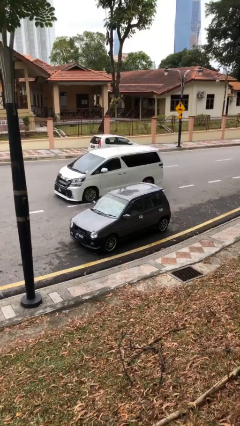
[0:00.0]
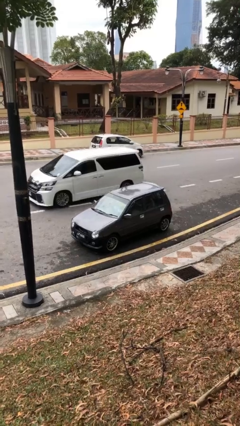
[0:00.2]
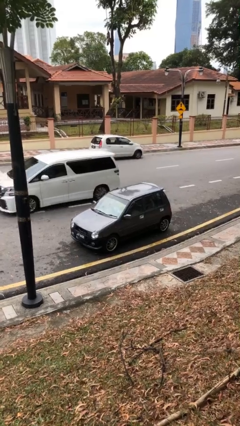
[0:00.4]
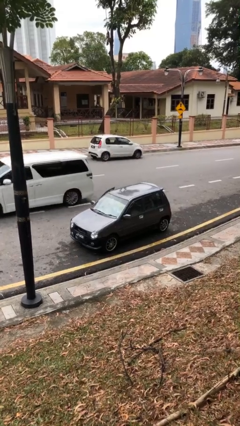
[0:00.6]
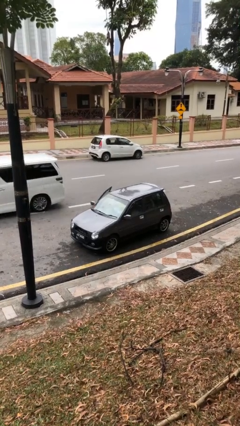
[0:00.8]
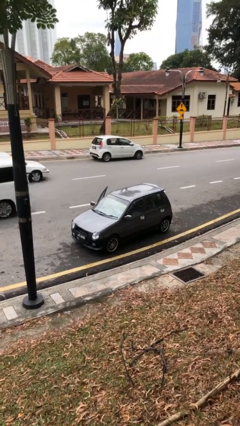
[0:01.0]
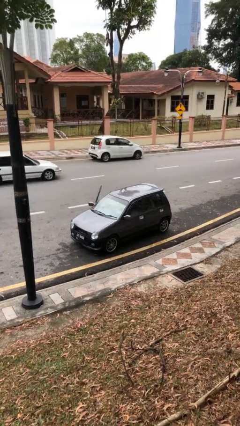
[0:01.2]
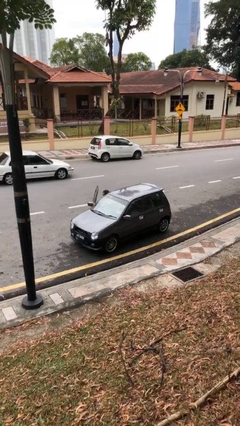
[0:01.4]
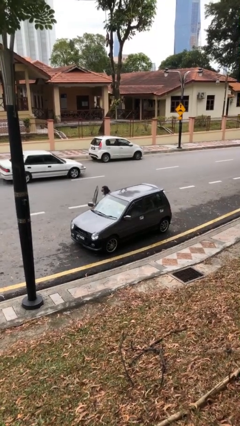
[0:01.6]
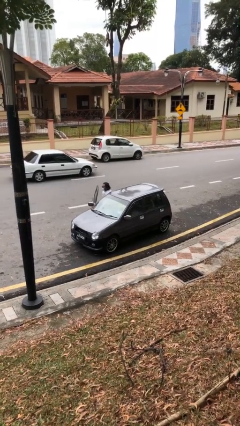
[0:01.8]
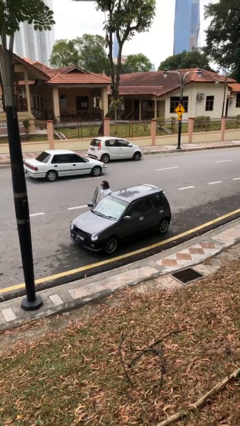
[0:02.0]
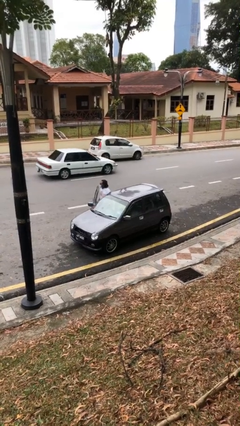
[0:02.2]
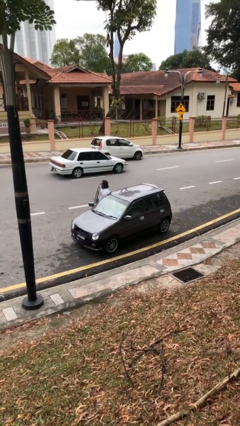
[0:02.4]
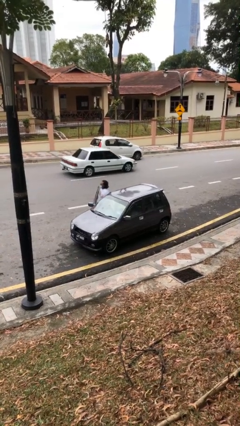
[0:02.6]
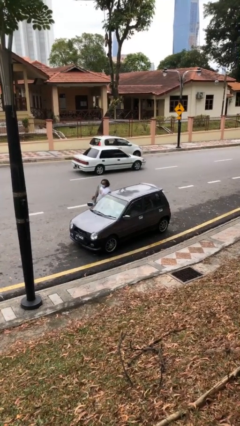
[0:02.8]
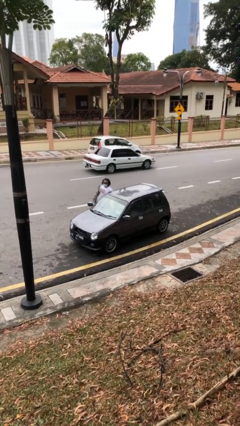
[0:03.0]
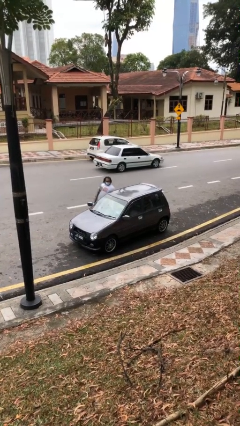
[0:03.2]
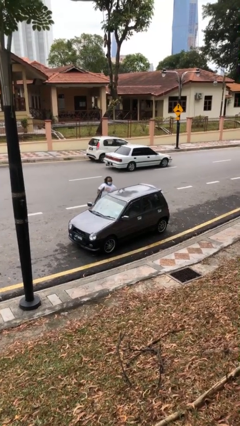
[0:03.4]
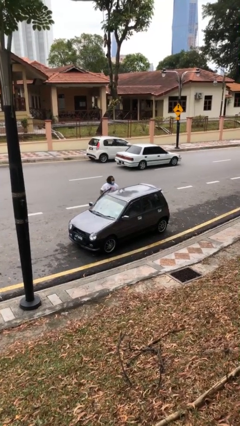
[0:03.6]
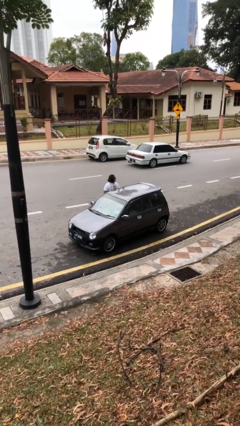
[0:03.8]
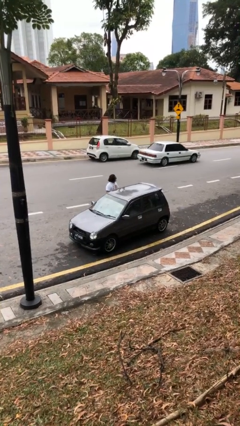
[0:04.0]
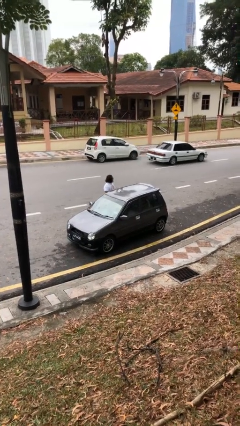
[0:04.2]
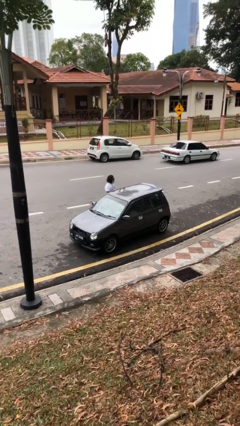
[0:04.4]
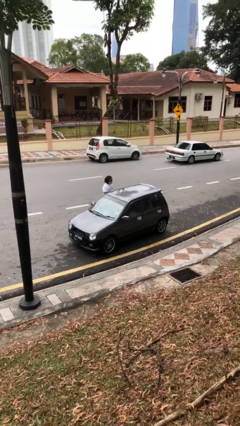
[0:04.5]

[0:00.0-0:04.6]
car drops off person

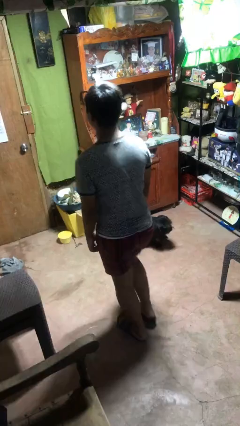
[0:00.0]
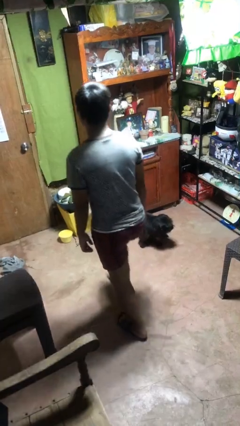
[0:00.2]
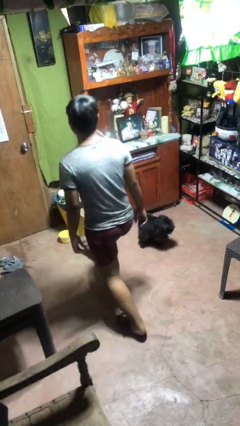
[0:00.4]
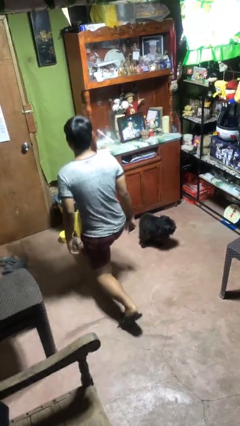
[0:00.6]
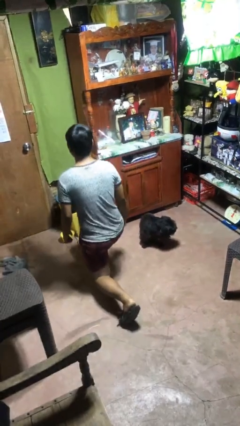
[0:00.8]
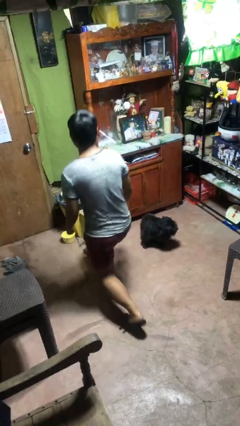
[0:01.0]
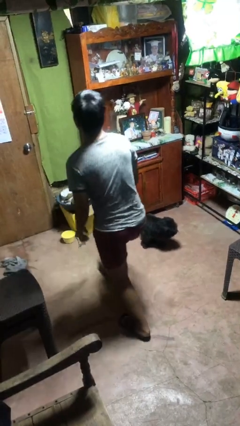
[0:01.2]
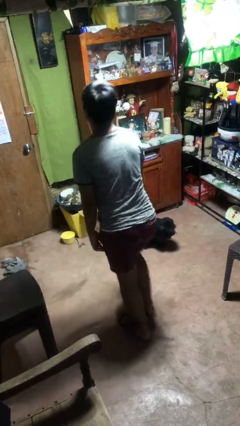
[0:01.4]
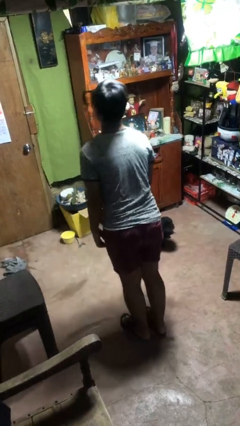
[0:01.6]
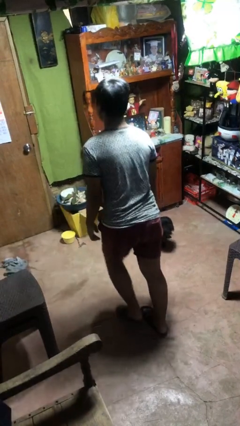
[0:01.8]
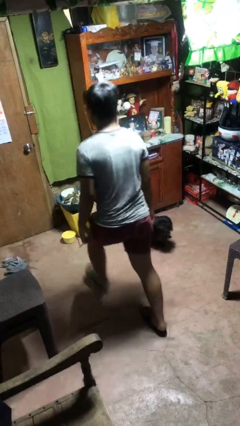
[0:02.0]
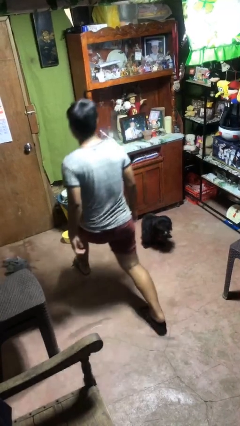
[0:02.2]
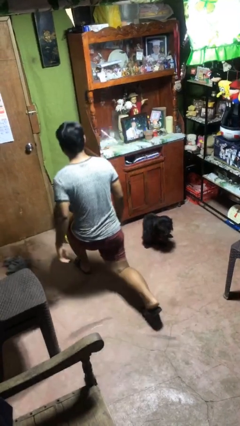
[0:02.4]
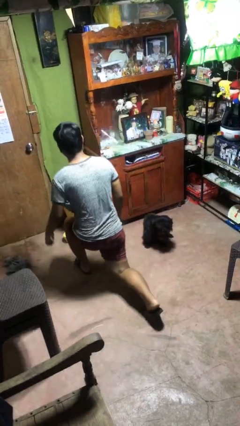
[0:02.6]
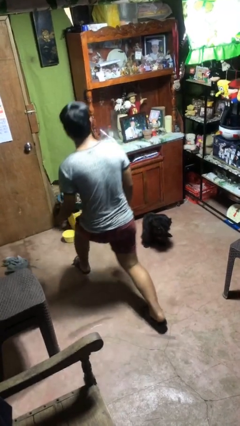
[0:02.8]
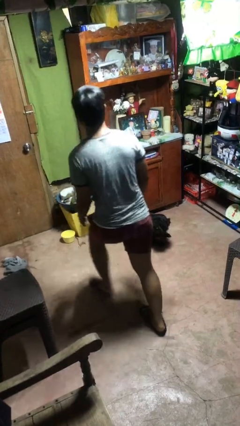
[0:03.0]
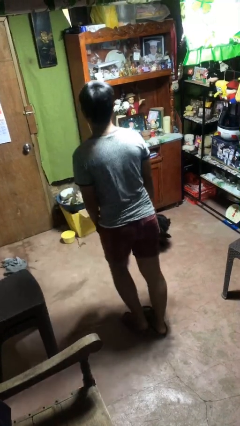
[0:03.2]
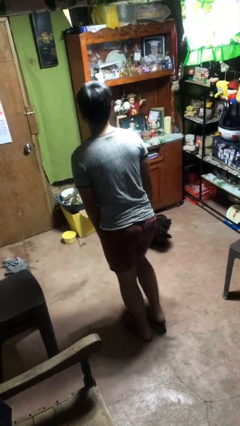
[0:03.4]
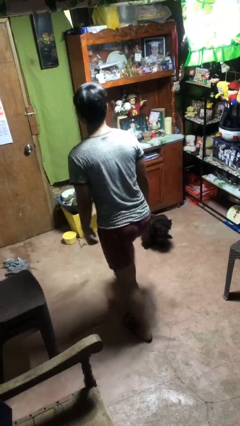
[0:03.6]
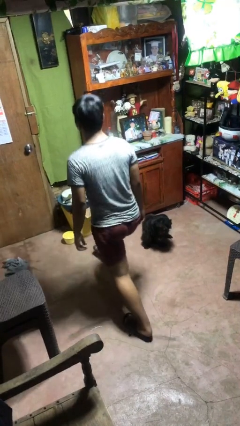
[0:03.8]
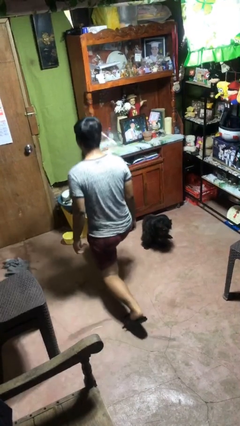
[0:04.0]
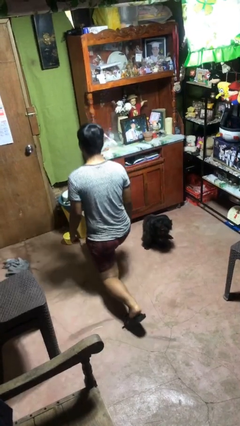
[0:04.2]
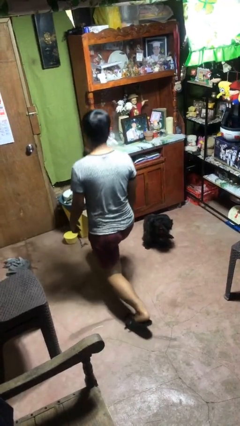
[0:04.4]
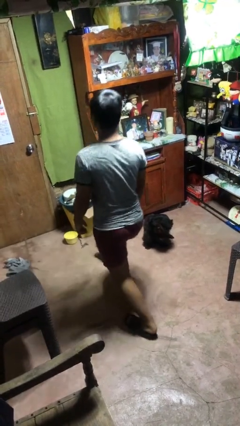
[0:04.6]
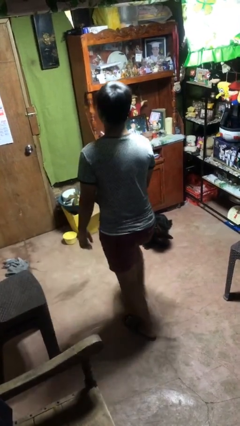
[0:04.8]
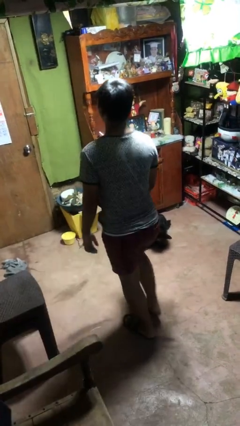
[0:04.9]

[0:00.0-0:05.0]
person exercises with lunges

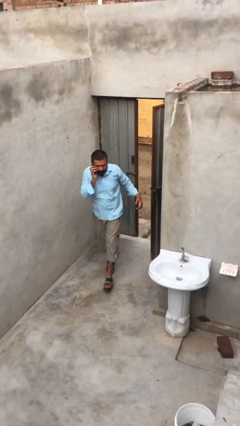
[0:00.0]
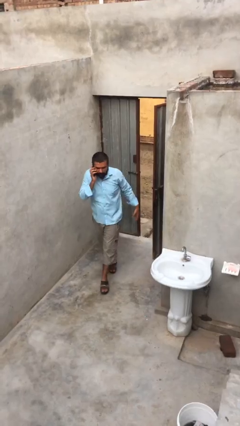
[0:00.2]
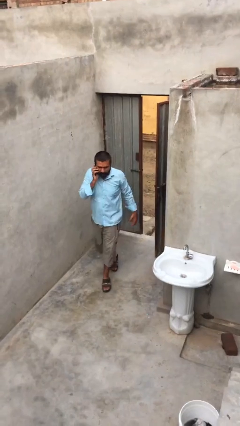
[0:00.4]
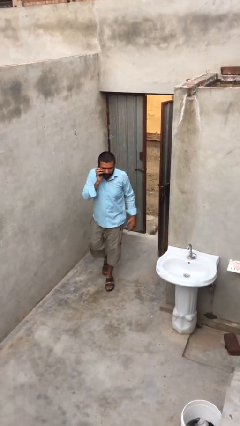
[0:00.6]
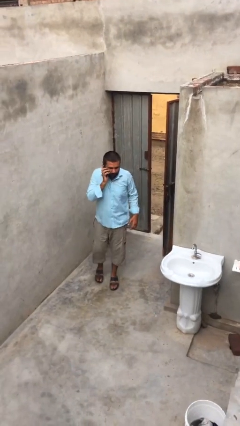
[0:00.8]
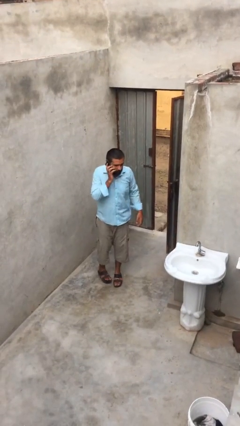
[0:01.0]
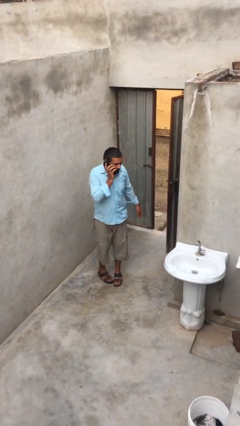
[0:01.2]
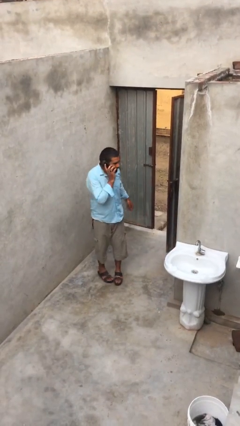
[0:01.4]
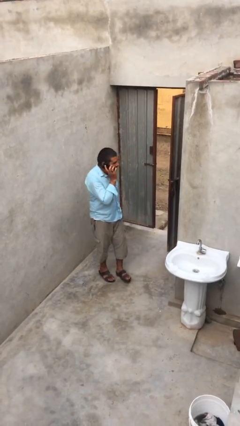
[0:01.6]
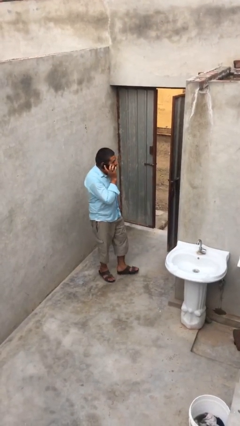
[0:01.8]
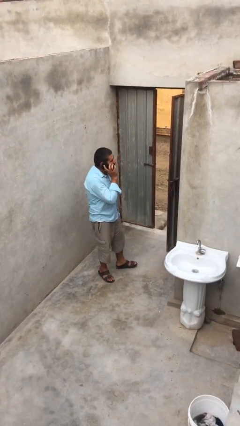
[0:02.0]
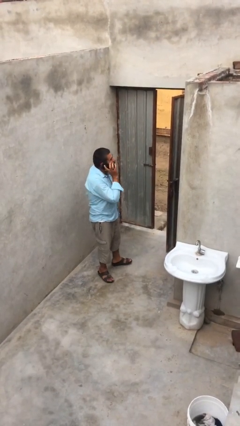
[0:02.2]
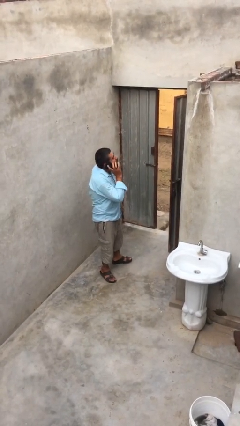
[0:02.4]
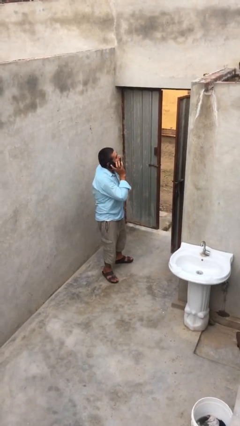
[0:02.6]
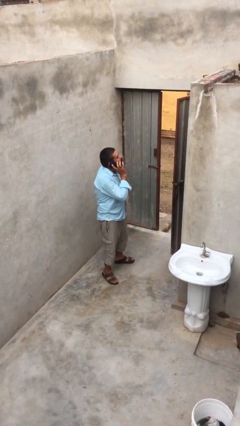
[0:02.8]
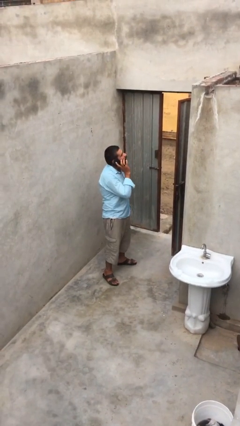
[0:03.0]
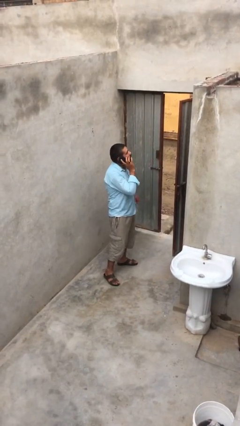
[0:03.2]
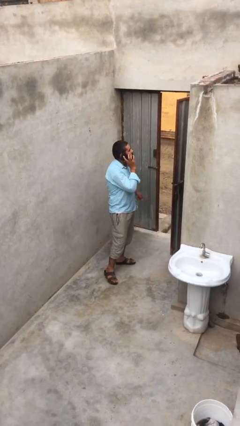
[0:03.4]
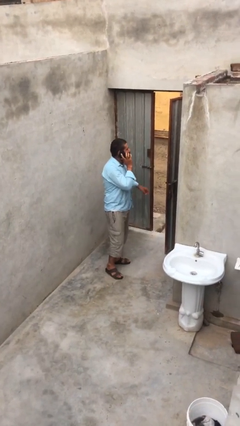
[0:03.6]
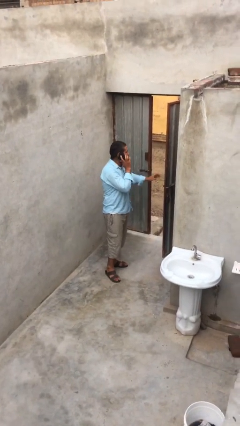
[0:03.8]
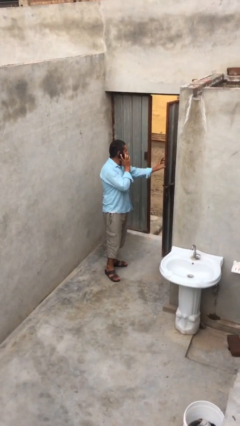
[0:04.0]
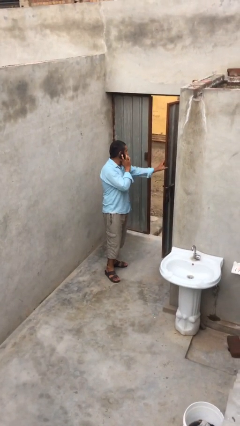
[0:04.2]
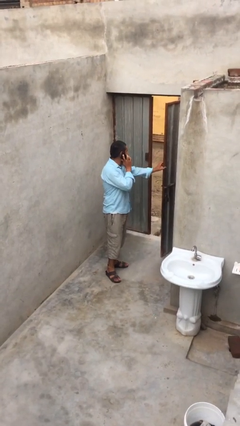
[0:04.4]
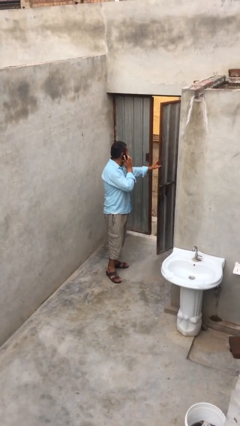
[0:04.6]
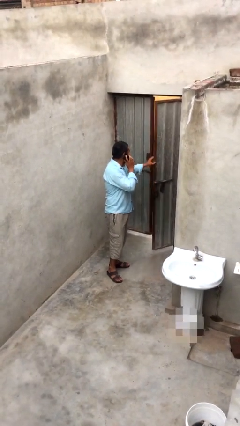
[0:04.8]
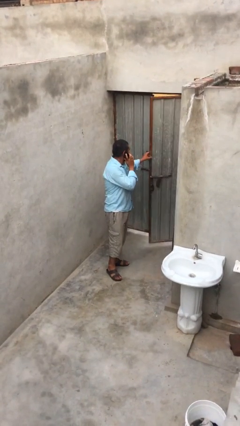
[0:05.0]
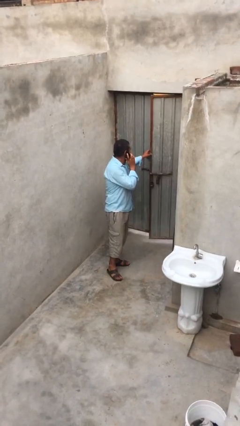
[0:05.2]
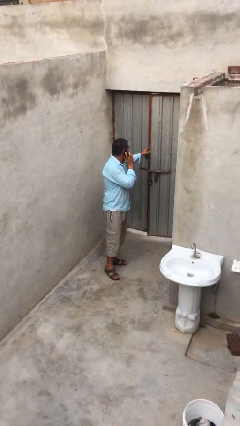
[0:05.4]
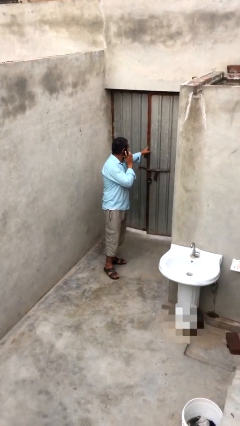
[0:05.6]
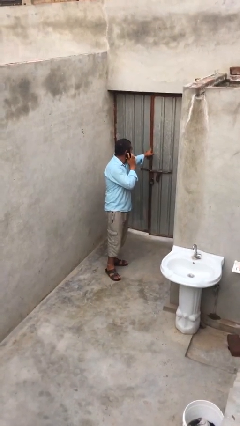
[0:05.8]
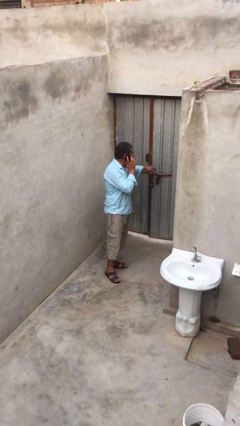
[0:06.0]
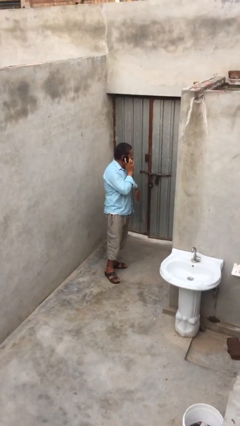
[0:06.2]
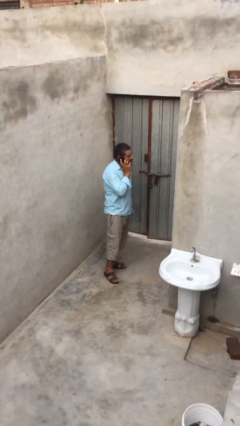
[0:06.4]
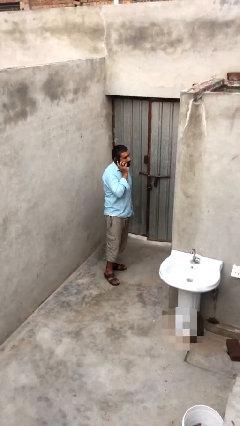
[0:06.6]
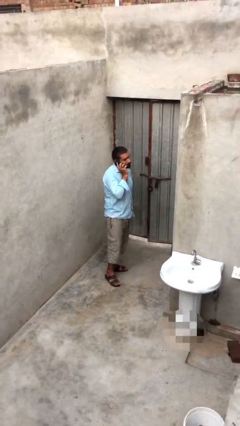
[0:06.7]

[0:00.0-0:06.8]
person closes facility door

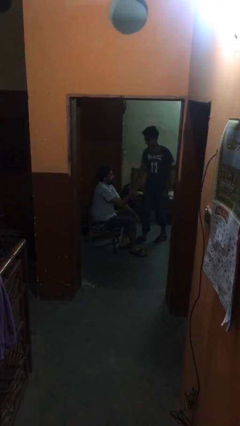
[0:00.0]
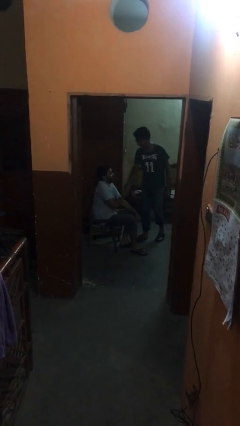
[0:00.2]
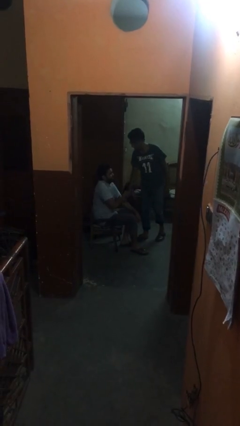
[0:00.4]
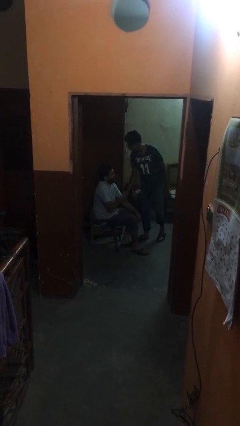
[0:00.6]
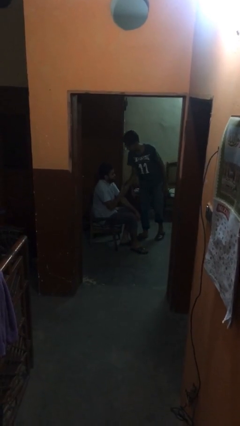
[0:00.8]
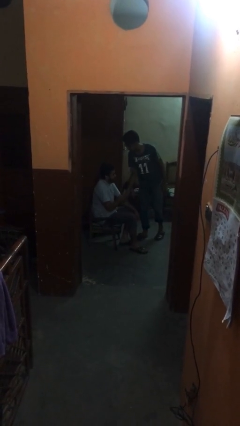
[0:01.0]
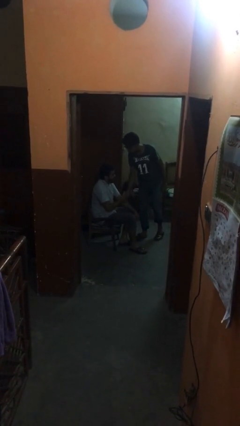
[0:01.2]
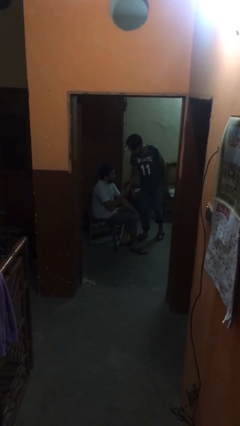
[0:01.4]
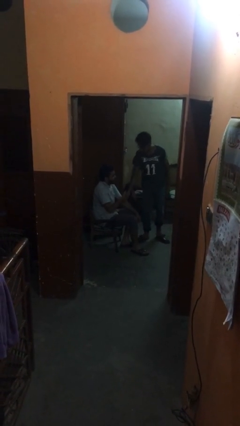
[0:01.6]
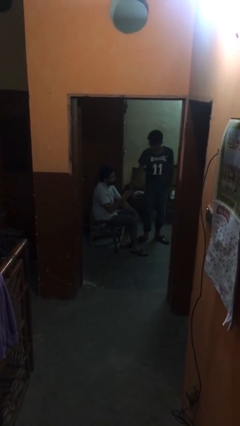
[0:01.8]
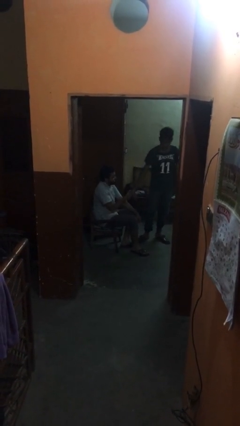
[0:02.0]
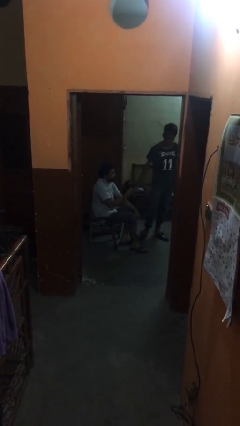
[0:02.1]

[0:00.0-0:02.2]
person shakes hand
